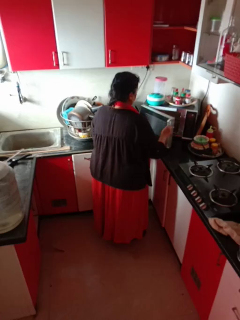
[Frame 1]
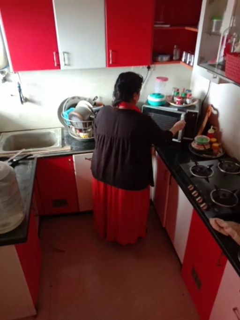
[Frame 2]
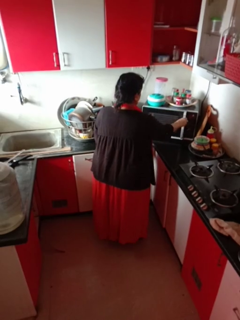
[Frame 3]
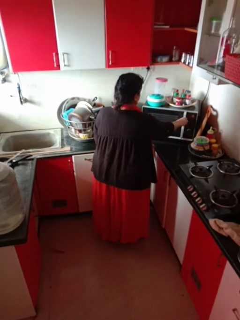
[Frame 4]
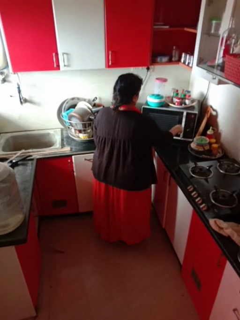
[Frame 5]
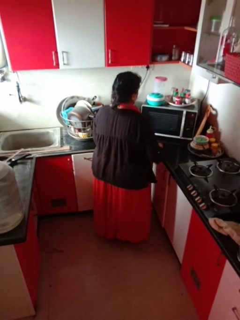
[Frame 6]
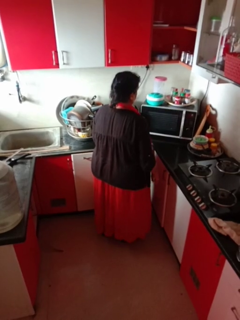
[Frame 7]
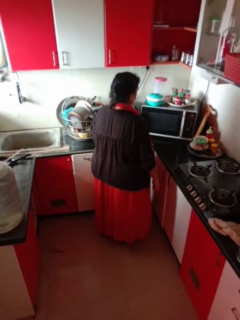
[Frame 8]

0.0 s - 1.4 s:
person closes microwave

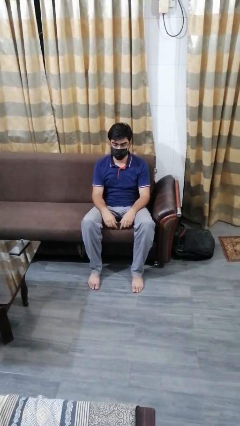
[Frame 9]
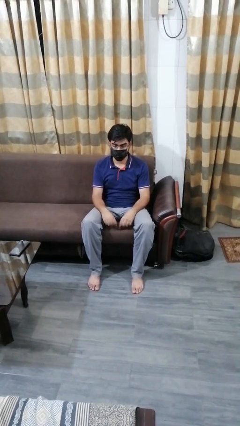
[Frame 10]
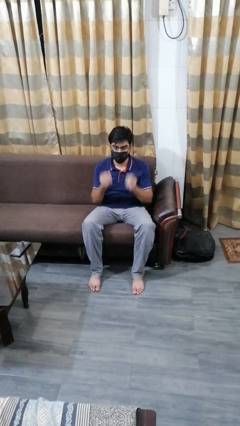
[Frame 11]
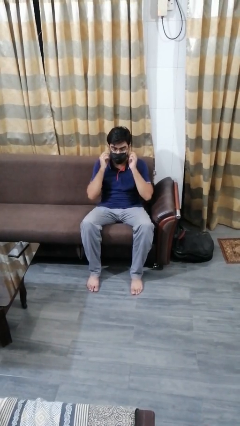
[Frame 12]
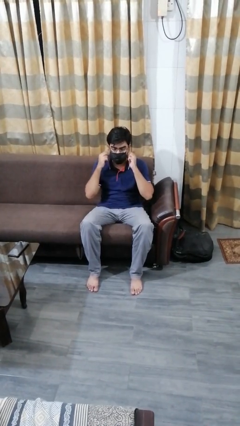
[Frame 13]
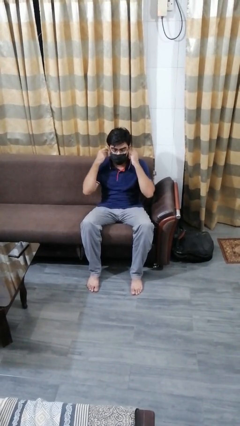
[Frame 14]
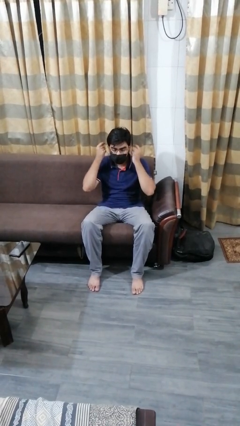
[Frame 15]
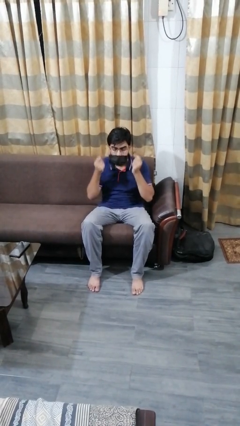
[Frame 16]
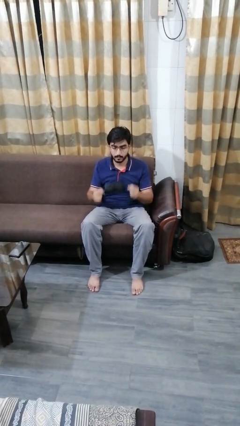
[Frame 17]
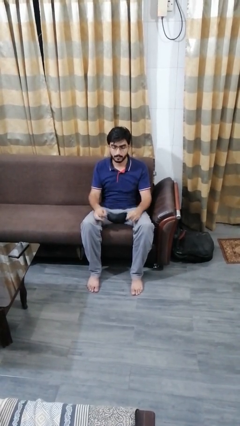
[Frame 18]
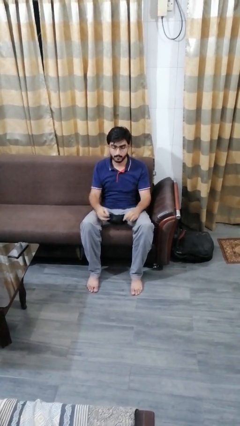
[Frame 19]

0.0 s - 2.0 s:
person takes off facemask

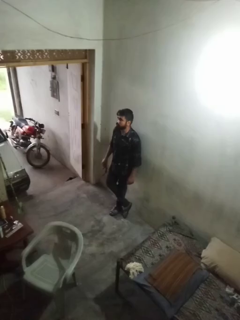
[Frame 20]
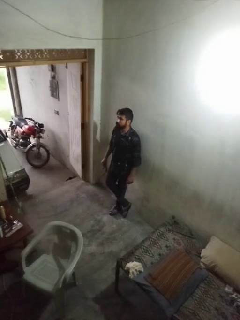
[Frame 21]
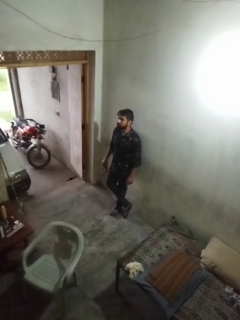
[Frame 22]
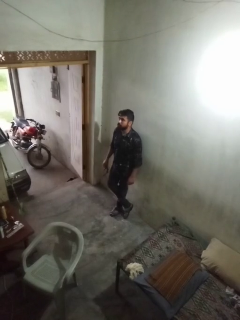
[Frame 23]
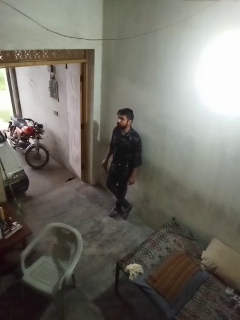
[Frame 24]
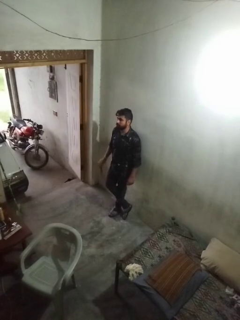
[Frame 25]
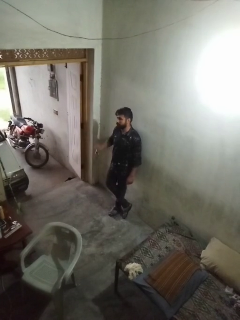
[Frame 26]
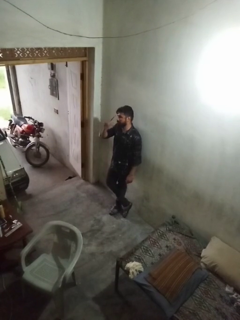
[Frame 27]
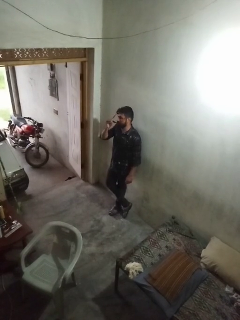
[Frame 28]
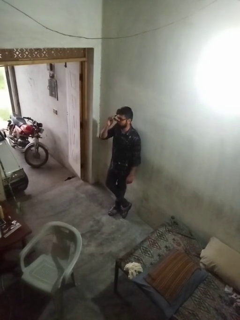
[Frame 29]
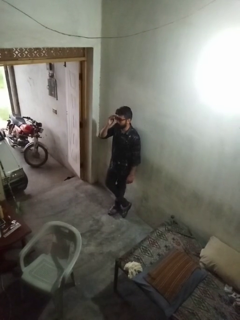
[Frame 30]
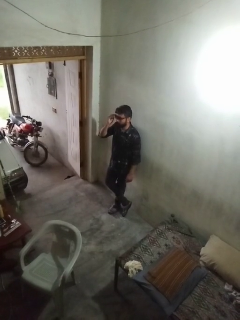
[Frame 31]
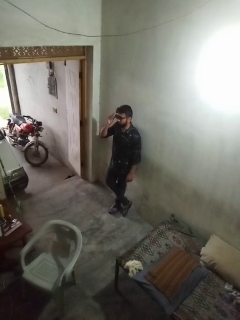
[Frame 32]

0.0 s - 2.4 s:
person puts on sunglasses

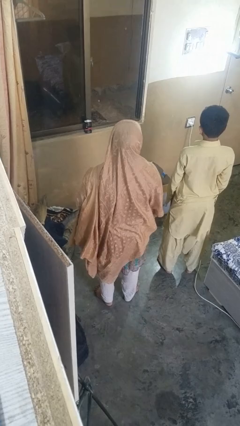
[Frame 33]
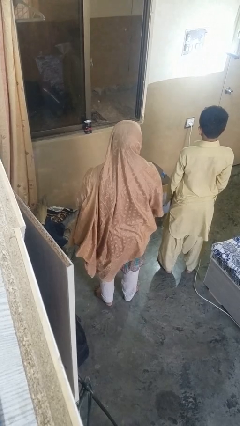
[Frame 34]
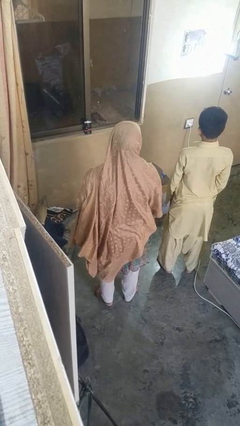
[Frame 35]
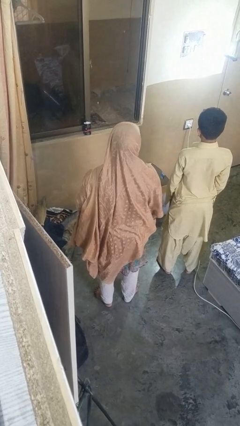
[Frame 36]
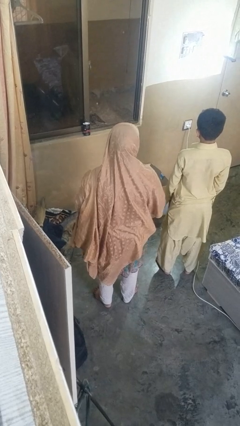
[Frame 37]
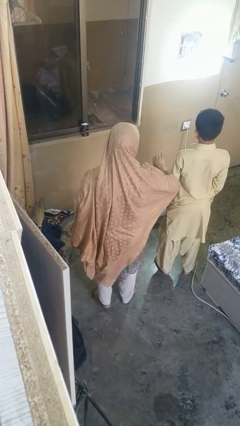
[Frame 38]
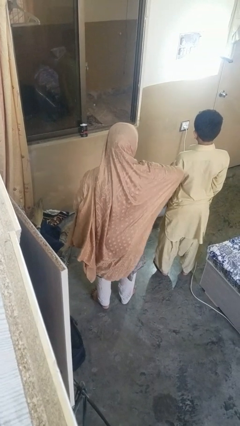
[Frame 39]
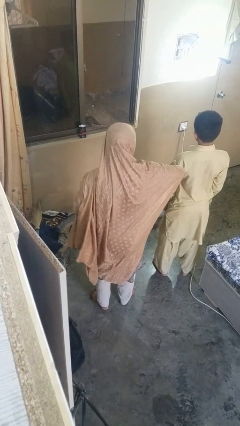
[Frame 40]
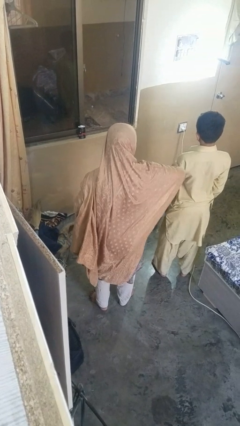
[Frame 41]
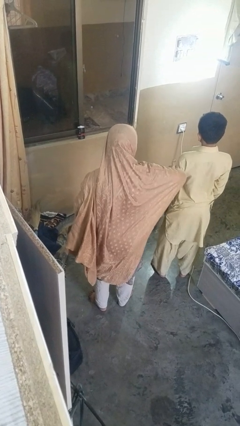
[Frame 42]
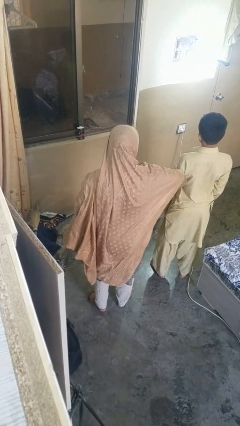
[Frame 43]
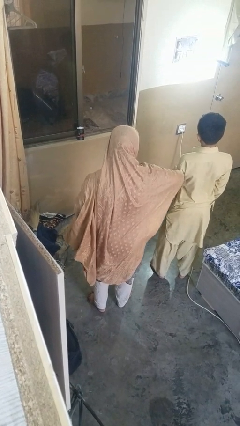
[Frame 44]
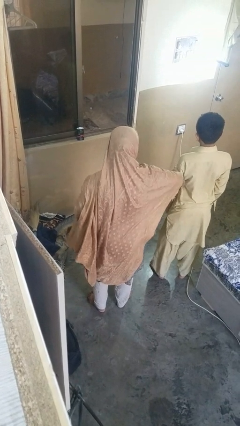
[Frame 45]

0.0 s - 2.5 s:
person grabs person by bicep

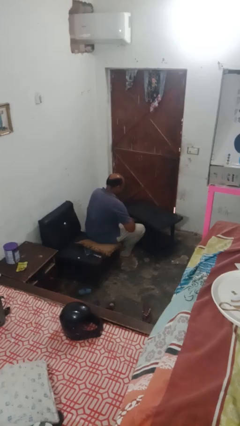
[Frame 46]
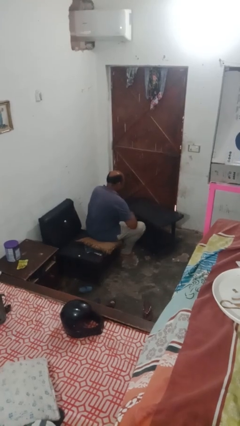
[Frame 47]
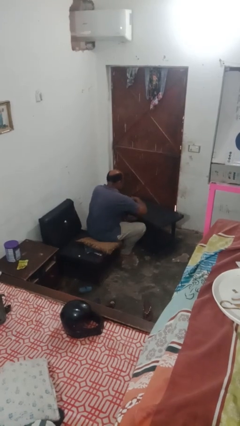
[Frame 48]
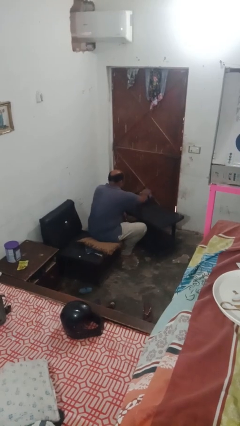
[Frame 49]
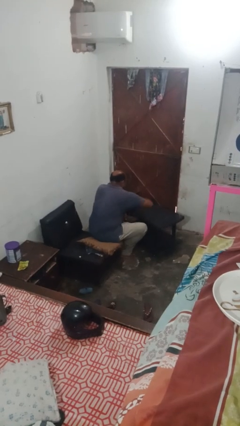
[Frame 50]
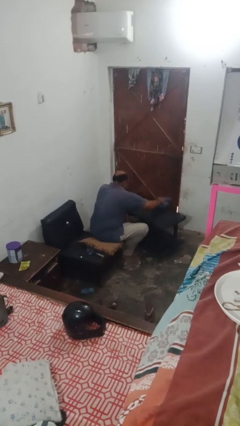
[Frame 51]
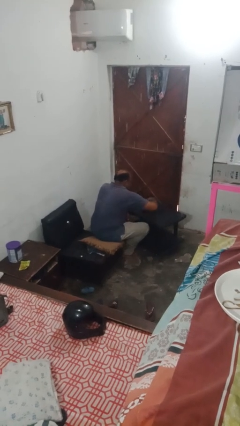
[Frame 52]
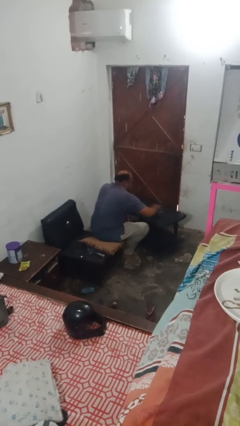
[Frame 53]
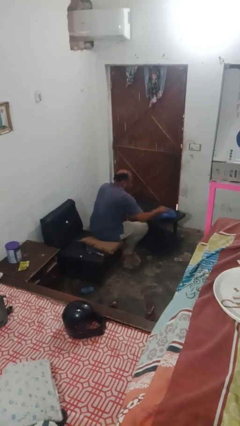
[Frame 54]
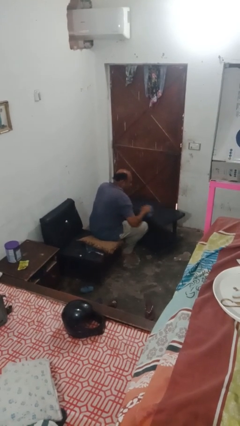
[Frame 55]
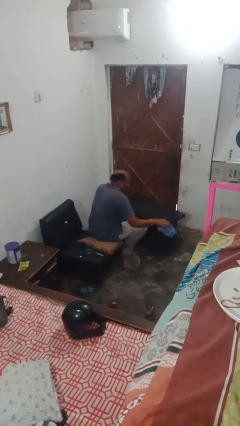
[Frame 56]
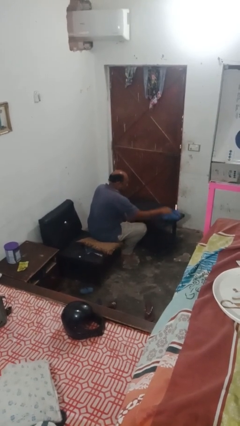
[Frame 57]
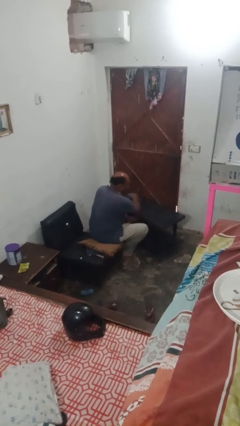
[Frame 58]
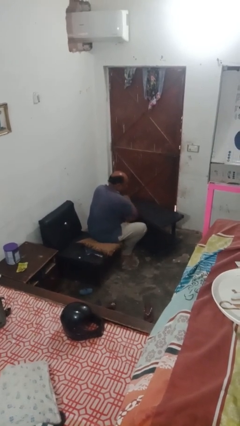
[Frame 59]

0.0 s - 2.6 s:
person cleans table with rag

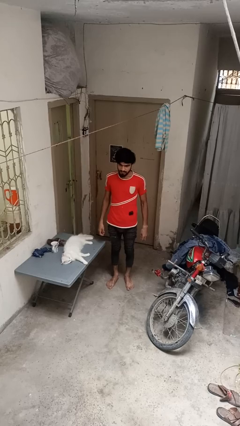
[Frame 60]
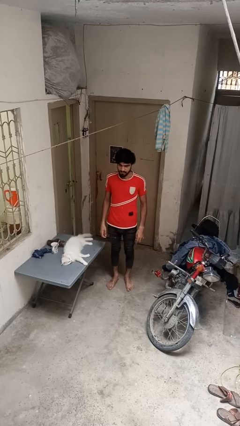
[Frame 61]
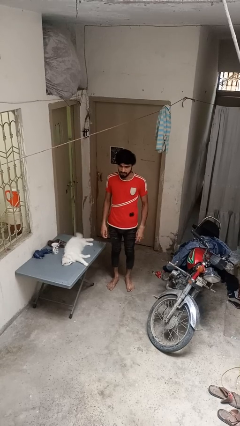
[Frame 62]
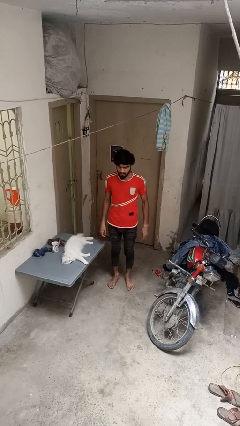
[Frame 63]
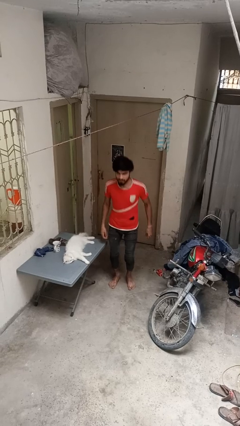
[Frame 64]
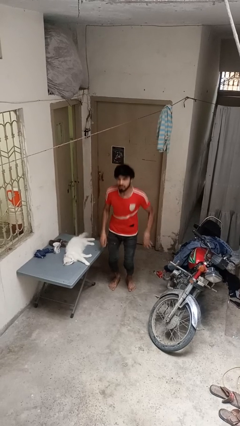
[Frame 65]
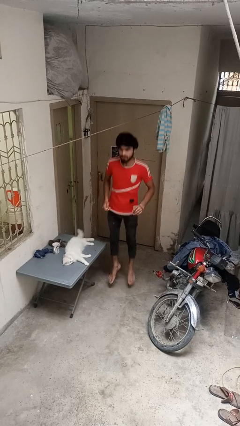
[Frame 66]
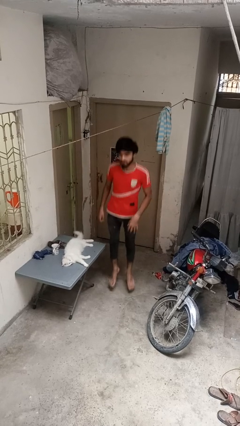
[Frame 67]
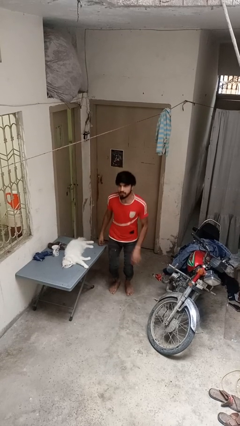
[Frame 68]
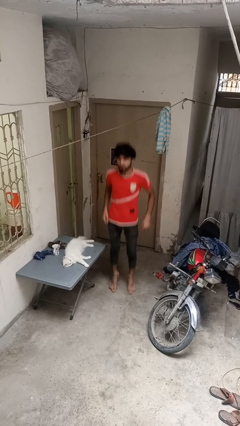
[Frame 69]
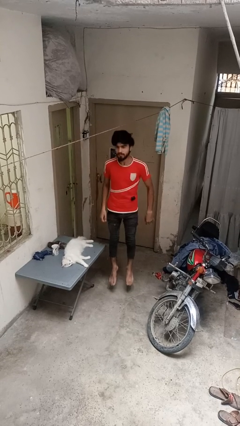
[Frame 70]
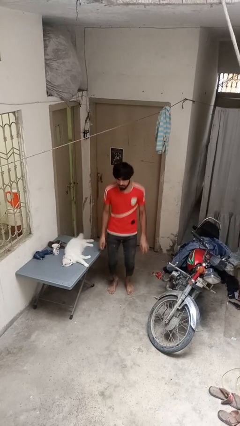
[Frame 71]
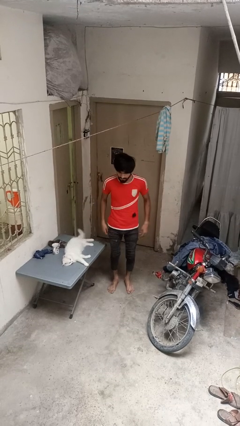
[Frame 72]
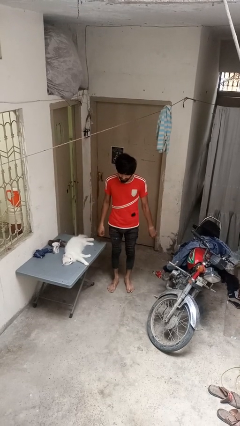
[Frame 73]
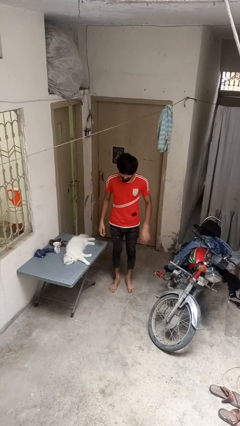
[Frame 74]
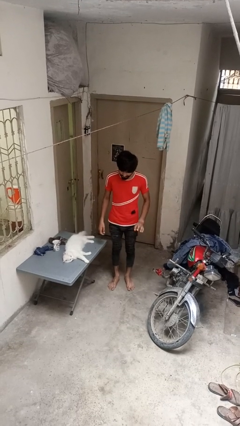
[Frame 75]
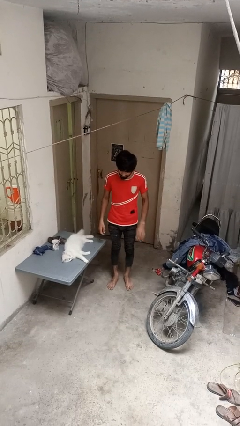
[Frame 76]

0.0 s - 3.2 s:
person jumps

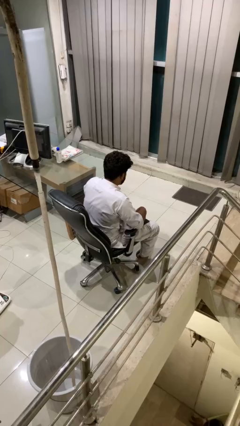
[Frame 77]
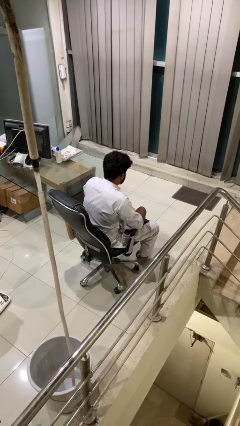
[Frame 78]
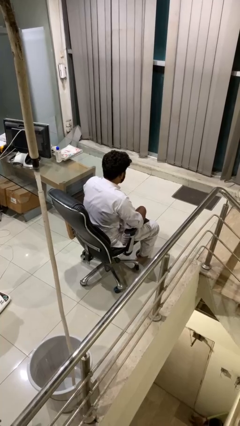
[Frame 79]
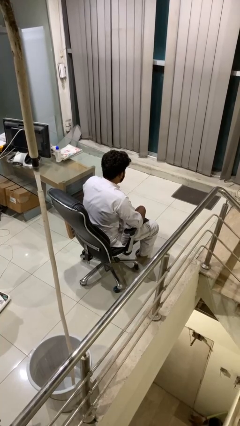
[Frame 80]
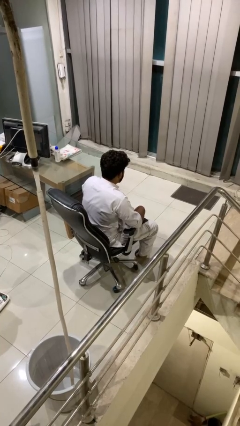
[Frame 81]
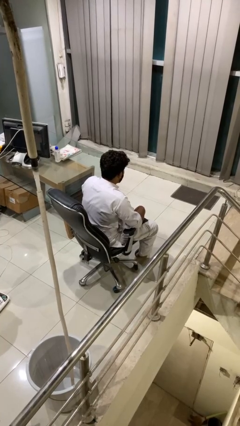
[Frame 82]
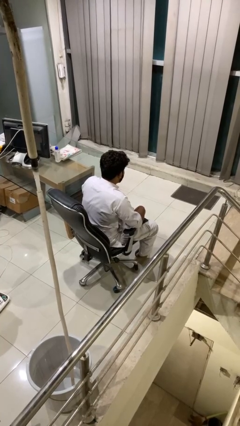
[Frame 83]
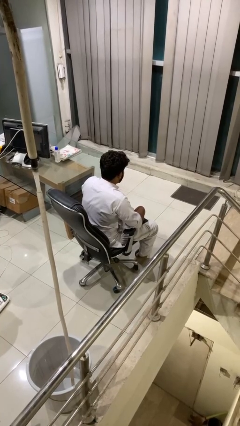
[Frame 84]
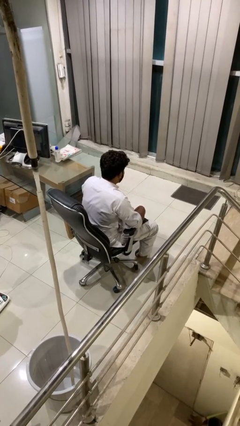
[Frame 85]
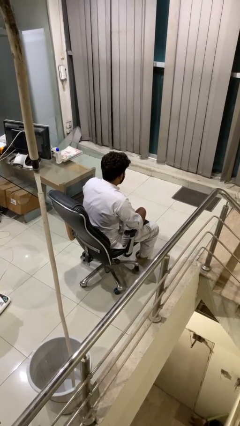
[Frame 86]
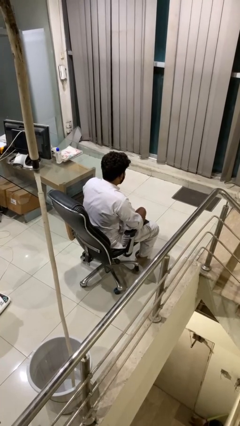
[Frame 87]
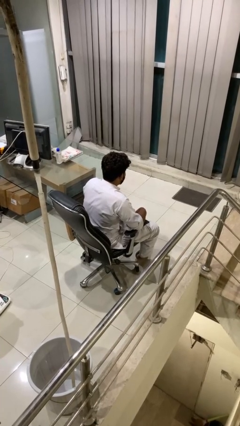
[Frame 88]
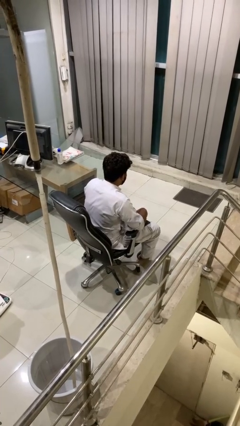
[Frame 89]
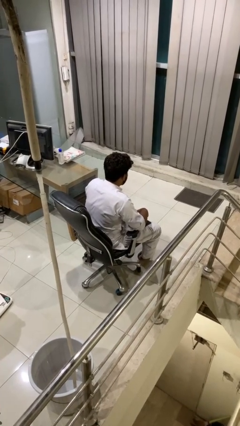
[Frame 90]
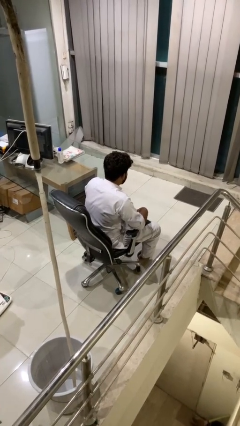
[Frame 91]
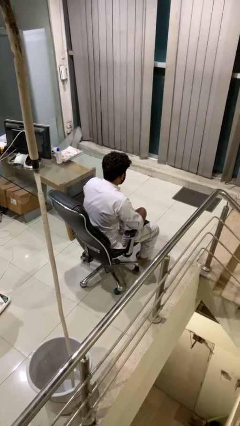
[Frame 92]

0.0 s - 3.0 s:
person nods head

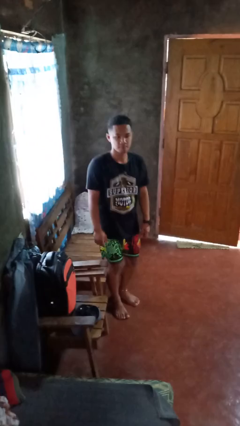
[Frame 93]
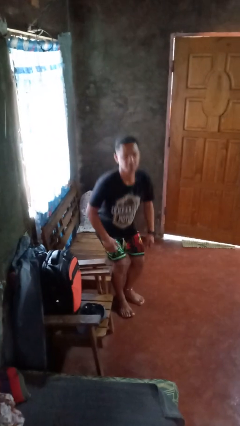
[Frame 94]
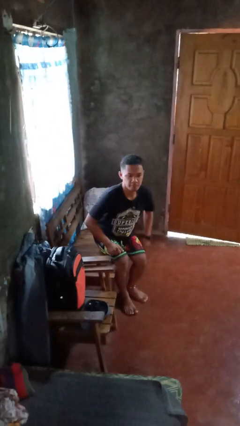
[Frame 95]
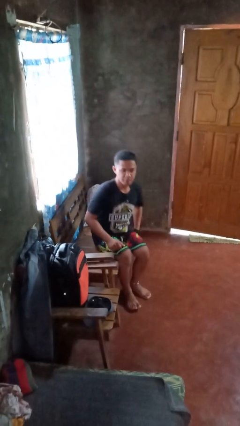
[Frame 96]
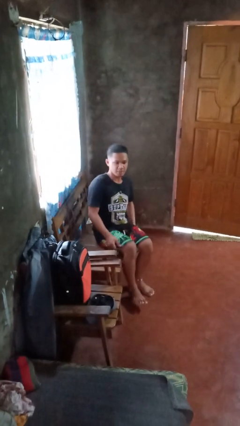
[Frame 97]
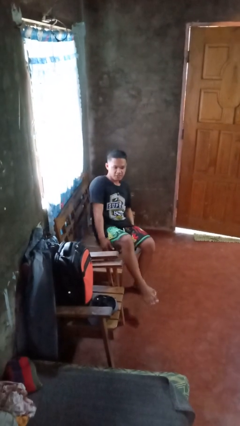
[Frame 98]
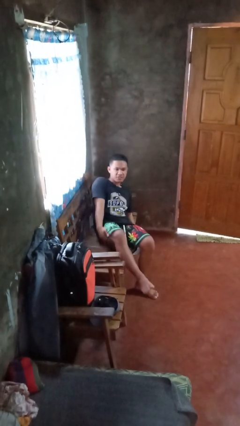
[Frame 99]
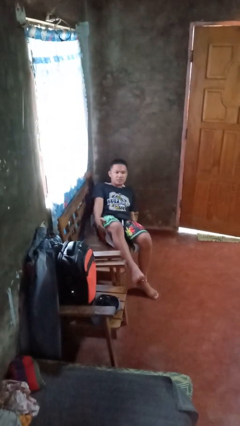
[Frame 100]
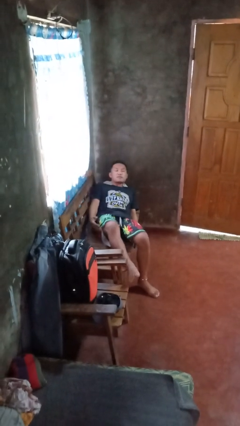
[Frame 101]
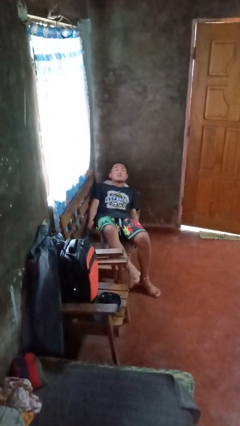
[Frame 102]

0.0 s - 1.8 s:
person lies down on couch
